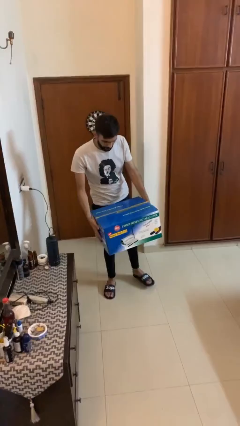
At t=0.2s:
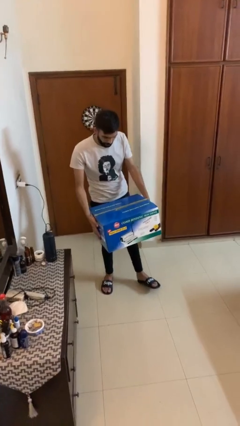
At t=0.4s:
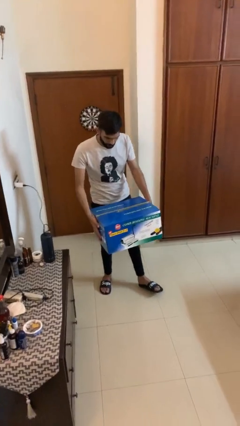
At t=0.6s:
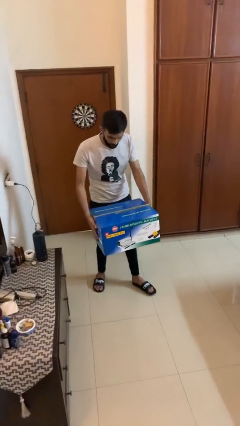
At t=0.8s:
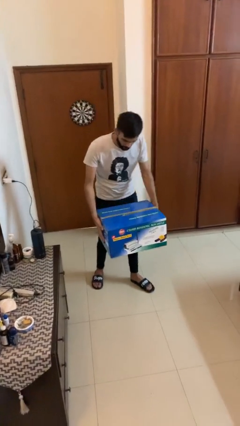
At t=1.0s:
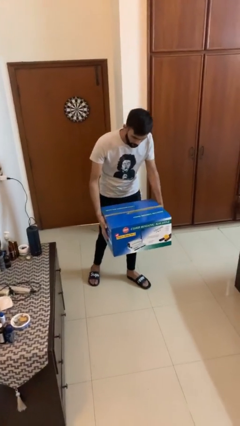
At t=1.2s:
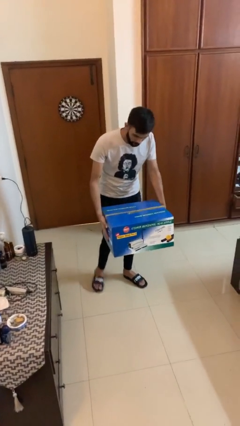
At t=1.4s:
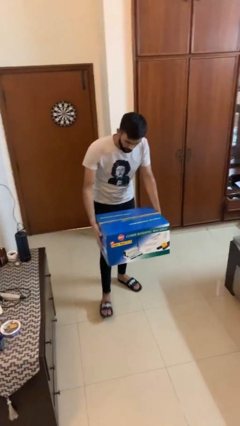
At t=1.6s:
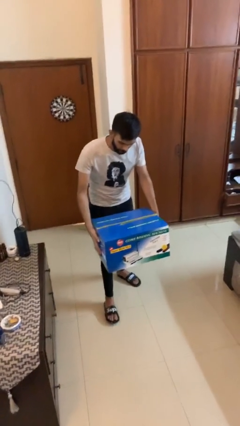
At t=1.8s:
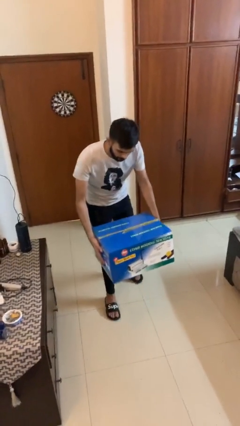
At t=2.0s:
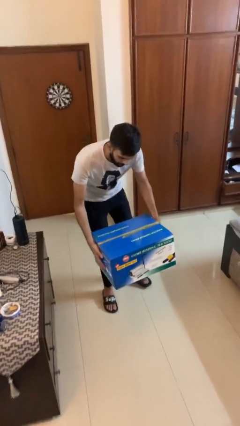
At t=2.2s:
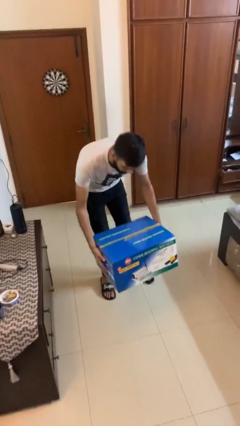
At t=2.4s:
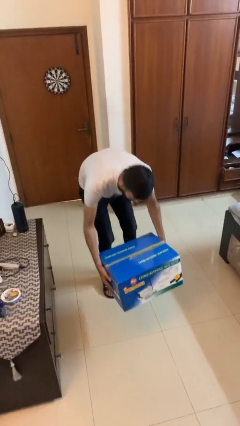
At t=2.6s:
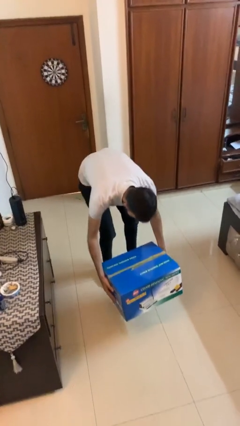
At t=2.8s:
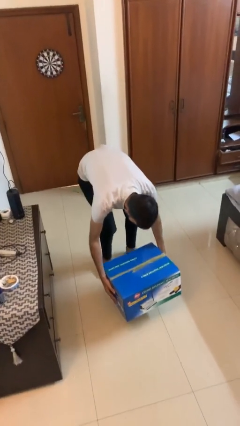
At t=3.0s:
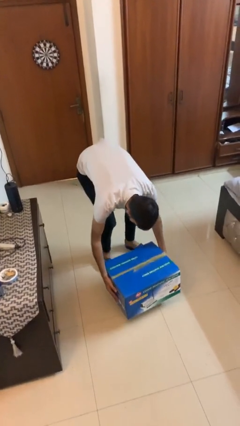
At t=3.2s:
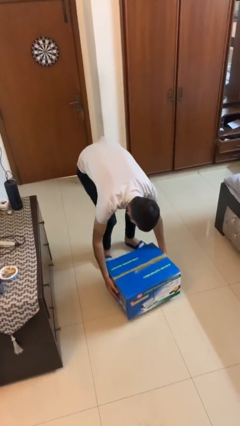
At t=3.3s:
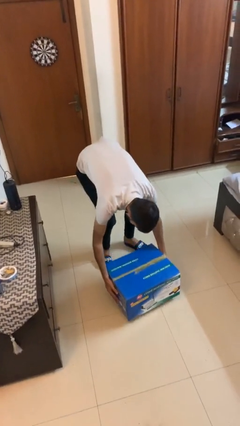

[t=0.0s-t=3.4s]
person puts down object on floor

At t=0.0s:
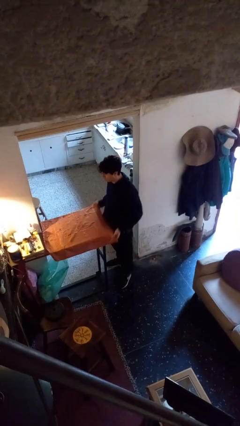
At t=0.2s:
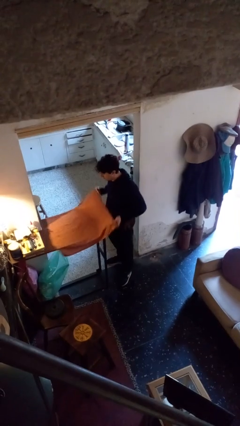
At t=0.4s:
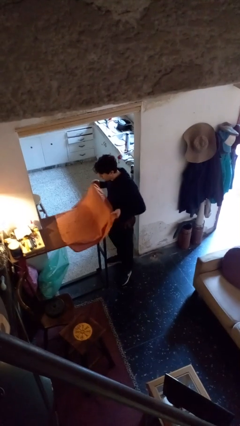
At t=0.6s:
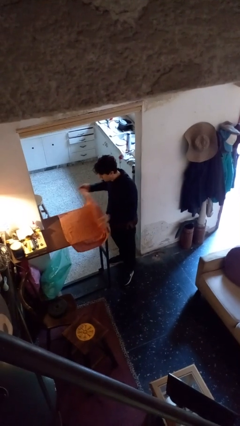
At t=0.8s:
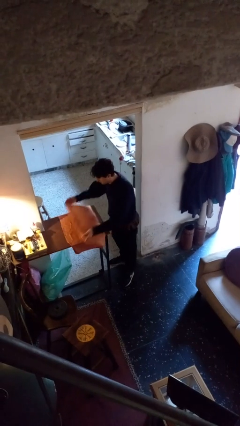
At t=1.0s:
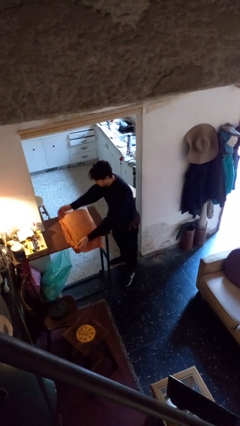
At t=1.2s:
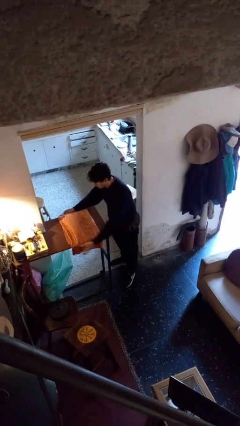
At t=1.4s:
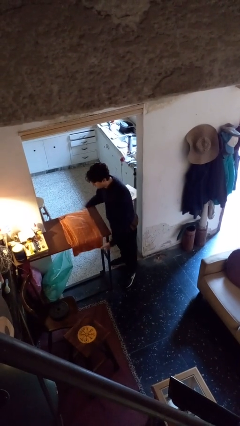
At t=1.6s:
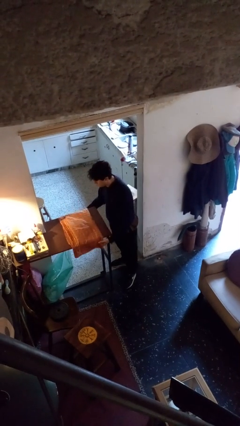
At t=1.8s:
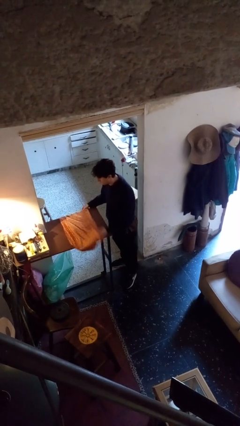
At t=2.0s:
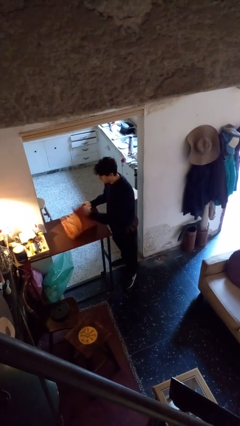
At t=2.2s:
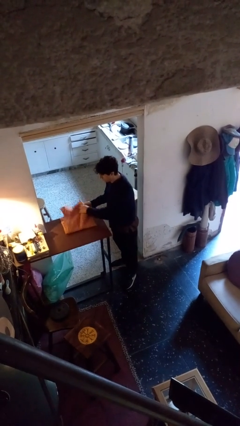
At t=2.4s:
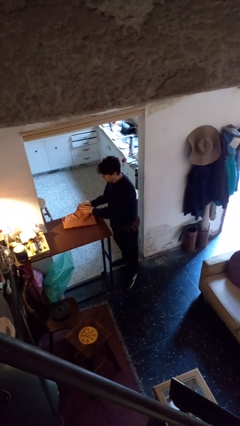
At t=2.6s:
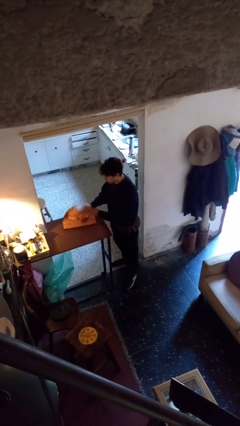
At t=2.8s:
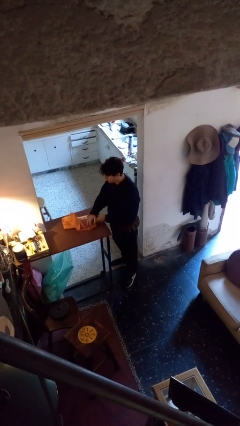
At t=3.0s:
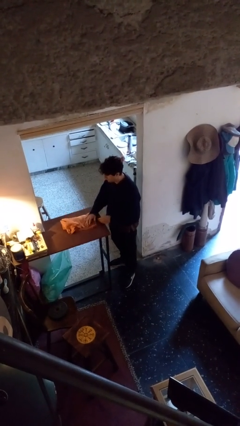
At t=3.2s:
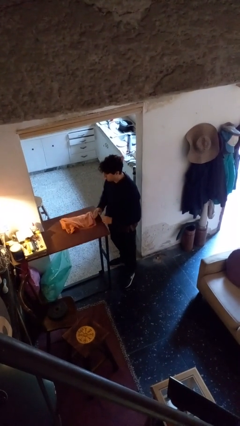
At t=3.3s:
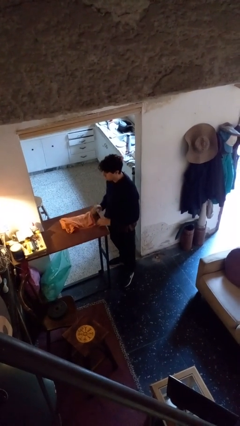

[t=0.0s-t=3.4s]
person folds tablecloth

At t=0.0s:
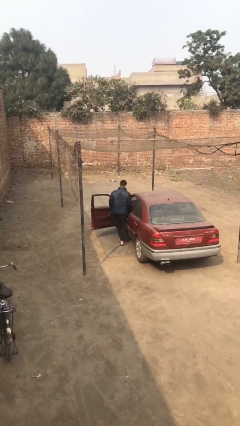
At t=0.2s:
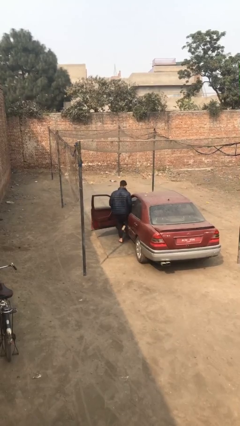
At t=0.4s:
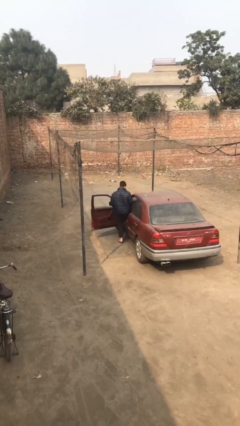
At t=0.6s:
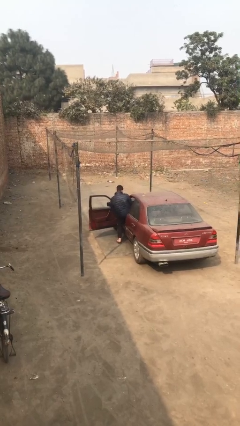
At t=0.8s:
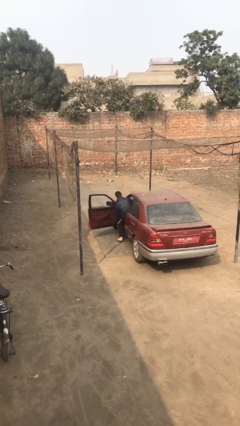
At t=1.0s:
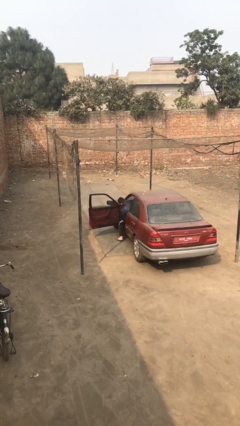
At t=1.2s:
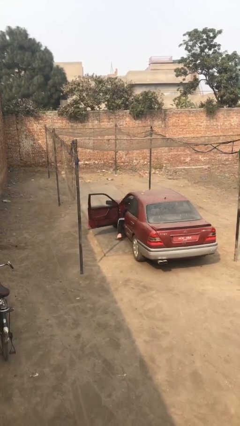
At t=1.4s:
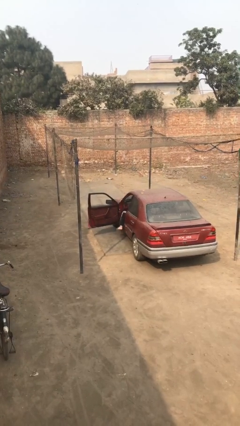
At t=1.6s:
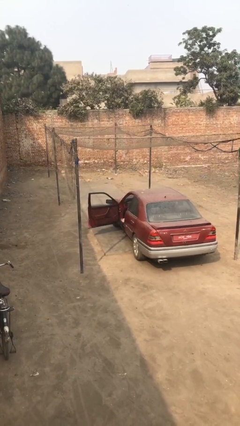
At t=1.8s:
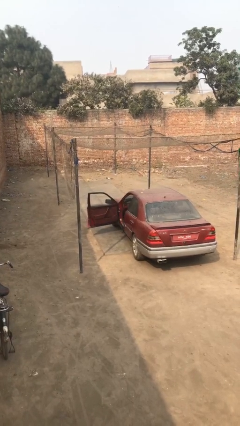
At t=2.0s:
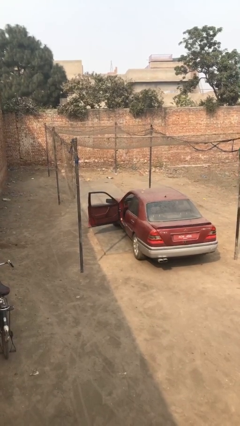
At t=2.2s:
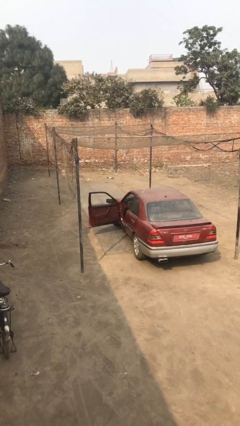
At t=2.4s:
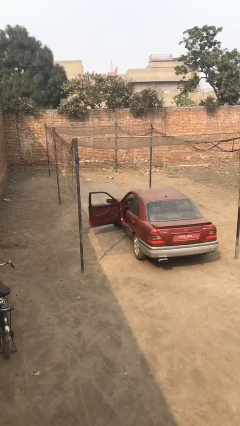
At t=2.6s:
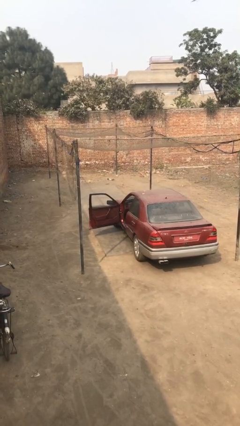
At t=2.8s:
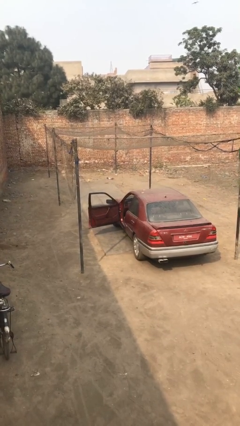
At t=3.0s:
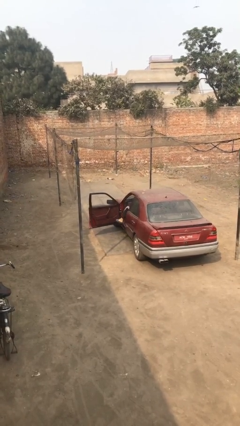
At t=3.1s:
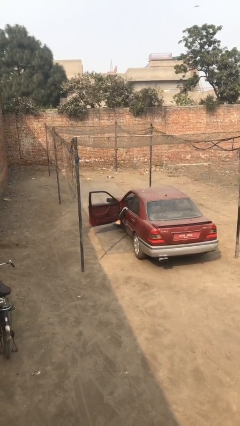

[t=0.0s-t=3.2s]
person enters car

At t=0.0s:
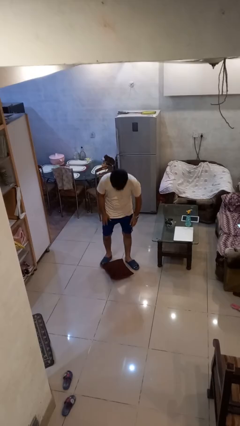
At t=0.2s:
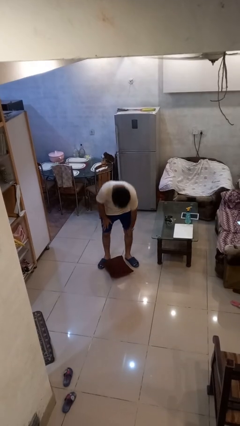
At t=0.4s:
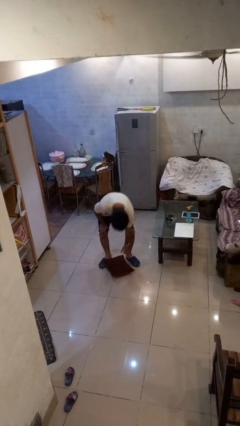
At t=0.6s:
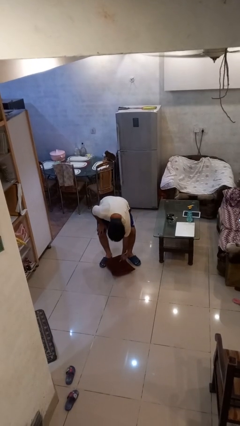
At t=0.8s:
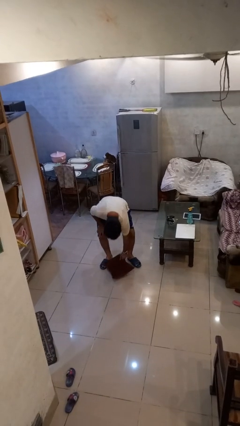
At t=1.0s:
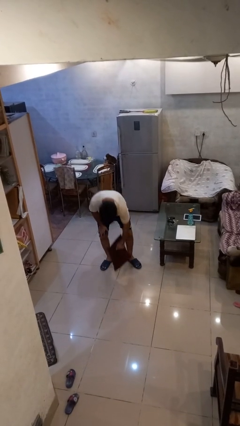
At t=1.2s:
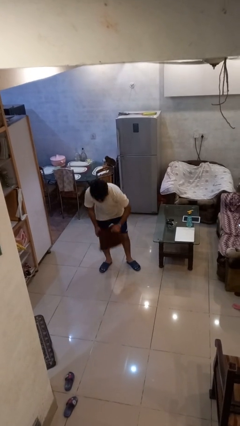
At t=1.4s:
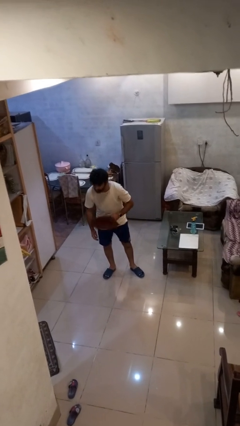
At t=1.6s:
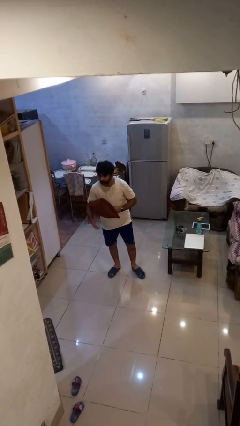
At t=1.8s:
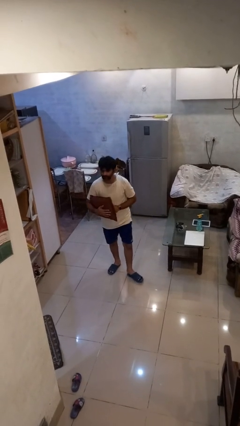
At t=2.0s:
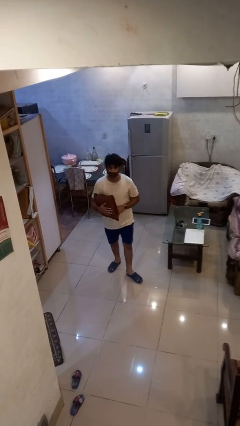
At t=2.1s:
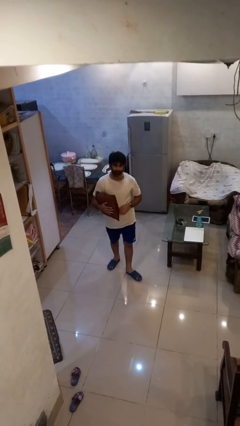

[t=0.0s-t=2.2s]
person picks up object from floor

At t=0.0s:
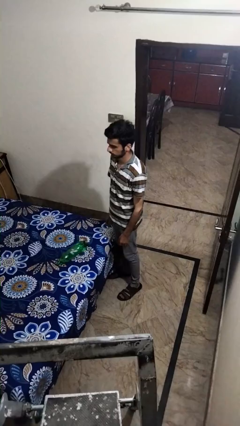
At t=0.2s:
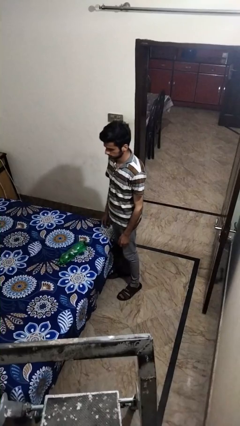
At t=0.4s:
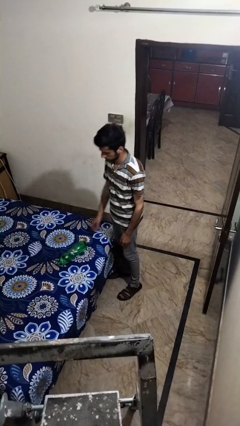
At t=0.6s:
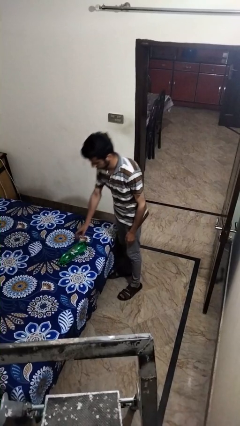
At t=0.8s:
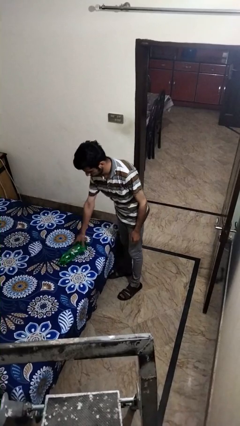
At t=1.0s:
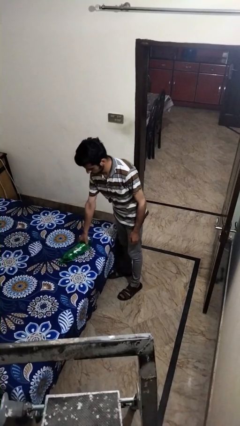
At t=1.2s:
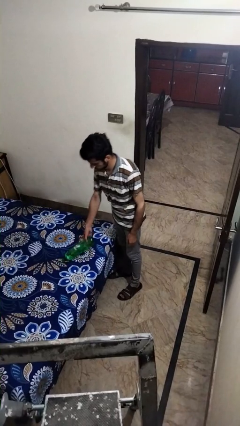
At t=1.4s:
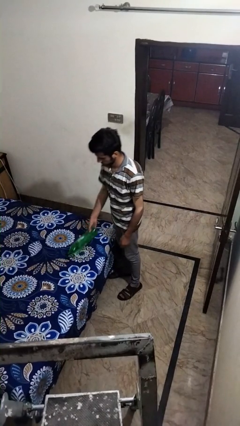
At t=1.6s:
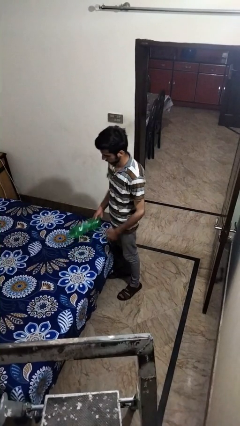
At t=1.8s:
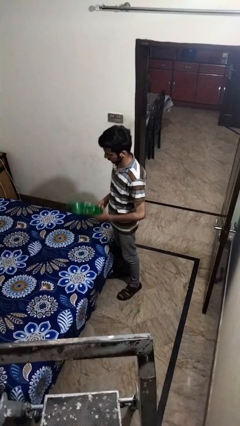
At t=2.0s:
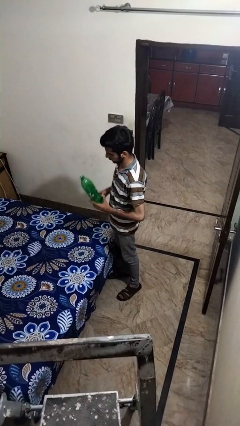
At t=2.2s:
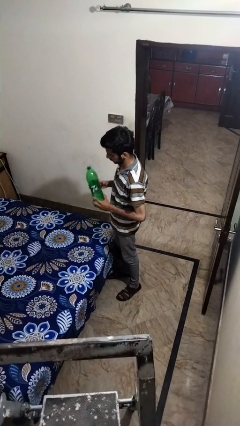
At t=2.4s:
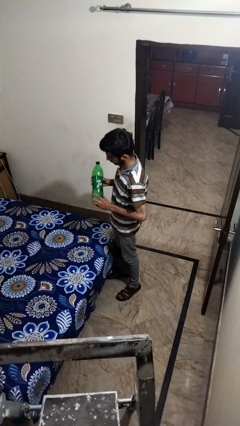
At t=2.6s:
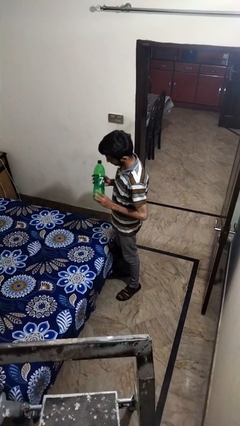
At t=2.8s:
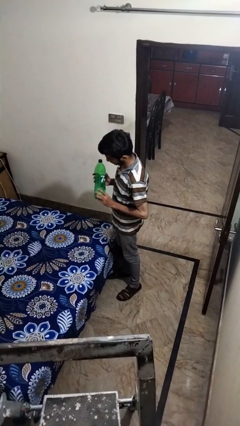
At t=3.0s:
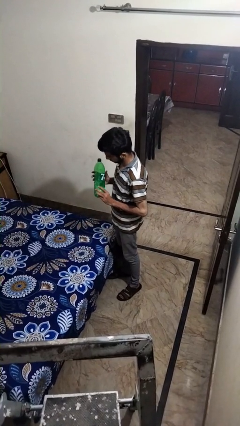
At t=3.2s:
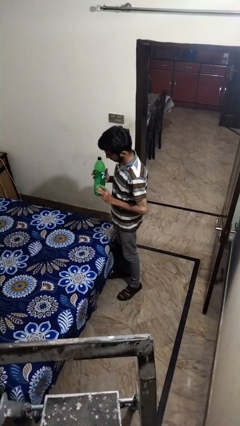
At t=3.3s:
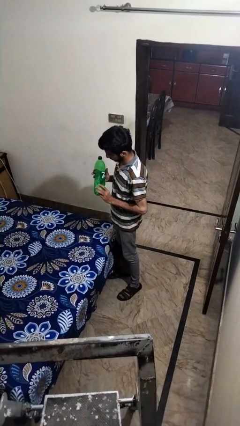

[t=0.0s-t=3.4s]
person picks up object from bed

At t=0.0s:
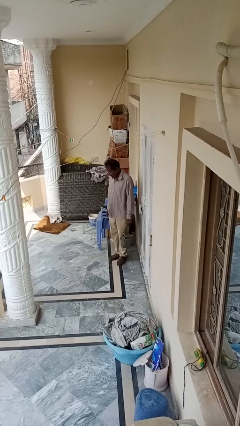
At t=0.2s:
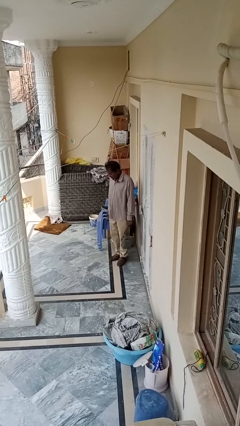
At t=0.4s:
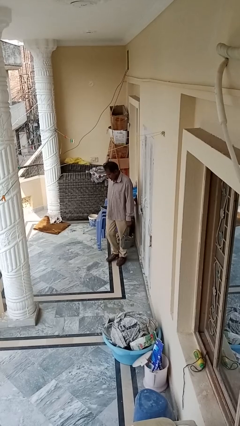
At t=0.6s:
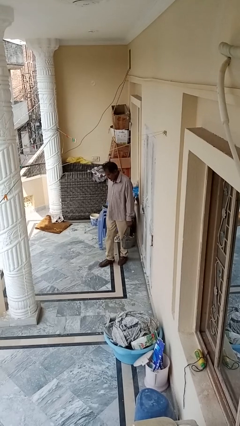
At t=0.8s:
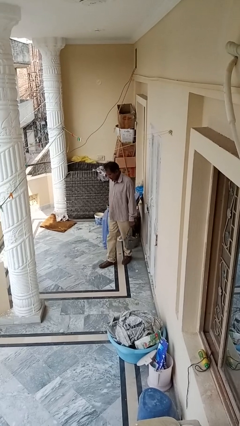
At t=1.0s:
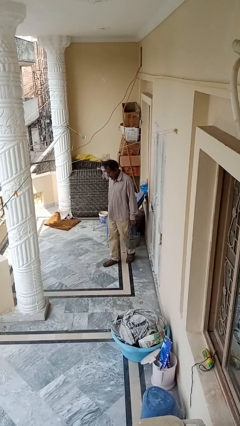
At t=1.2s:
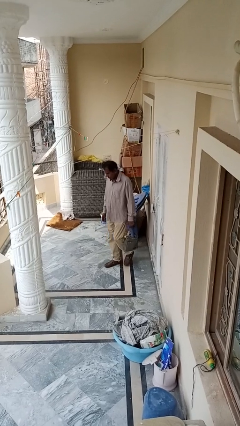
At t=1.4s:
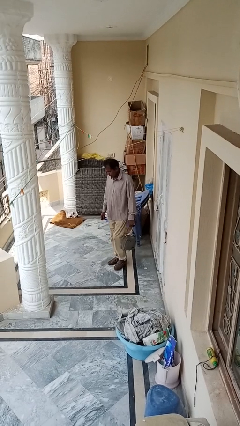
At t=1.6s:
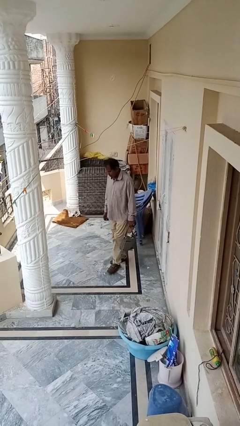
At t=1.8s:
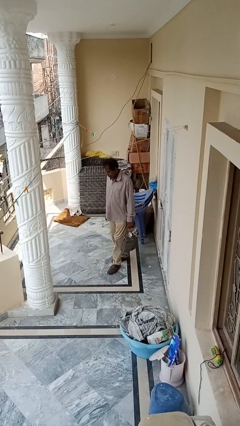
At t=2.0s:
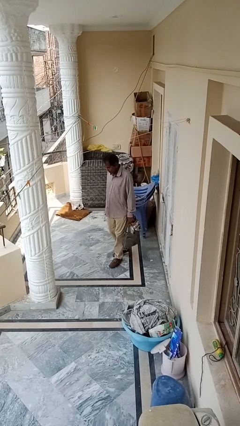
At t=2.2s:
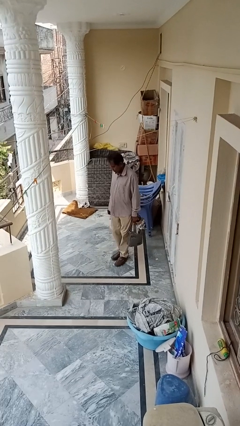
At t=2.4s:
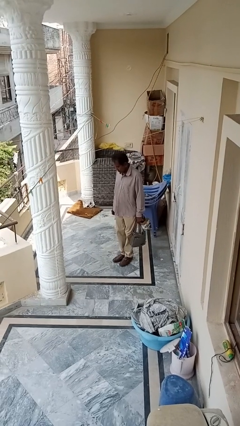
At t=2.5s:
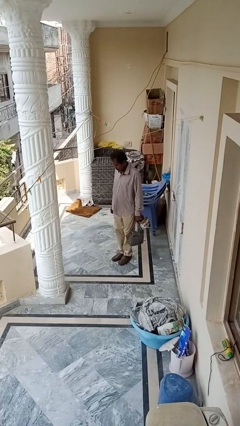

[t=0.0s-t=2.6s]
person carries groceries
